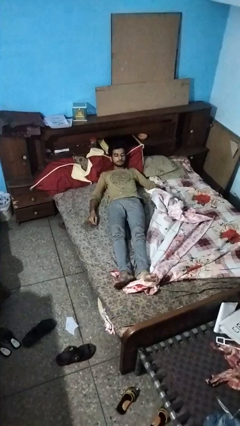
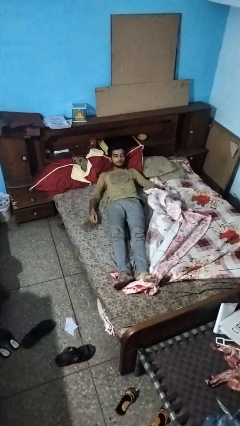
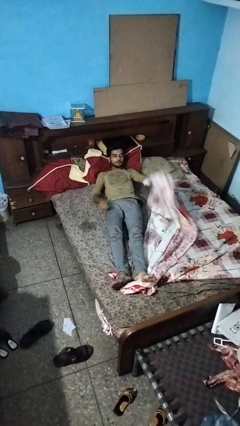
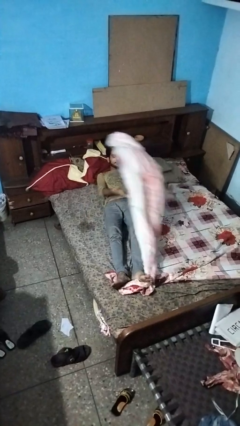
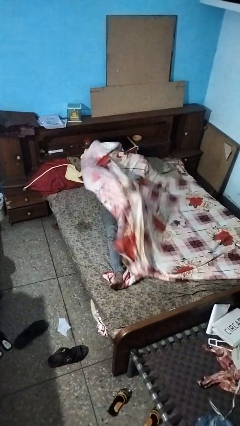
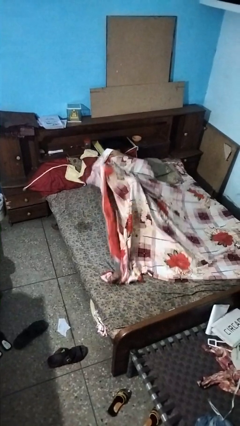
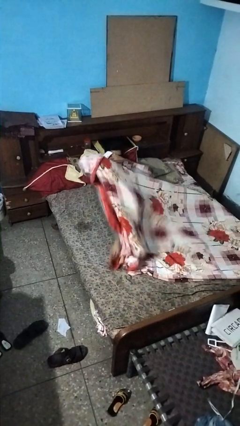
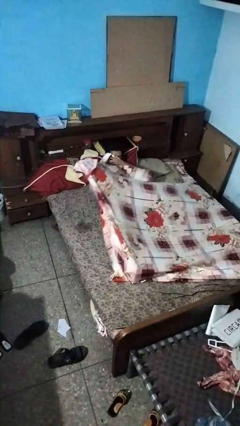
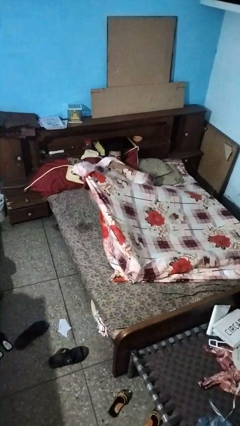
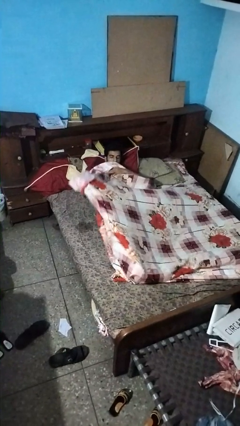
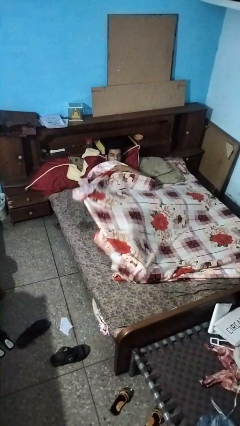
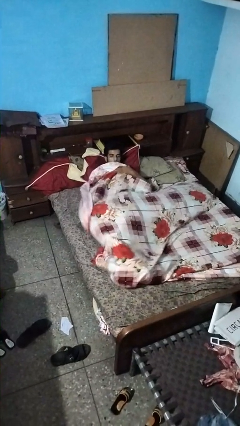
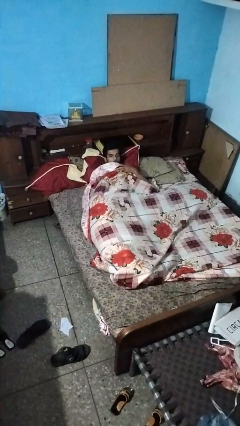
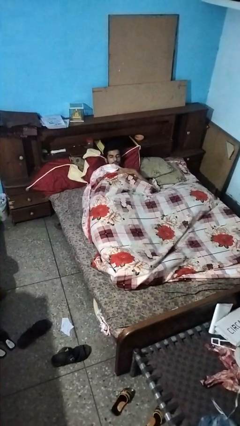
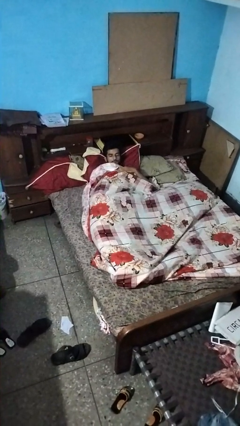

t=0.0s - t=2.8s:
person covers with bedsheets

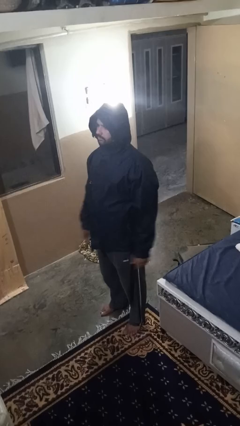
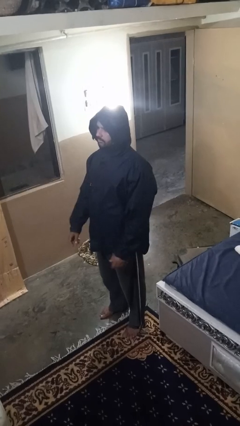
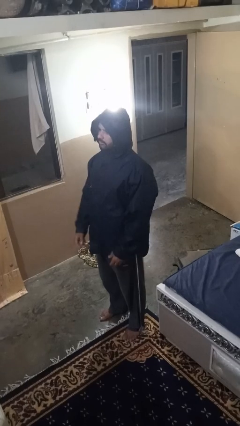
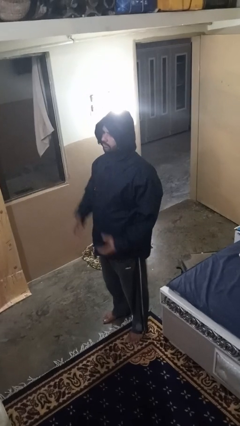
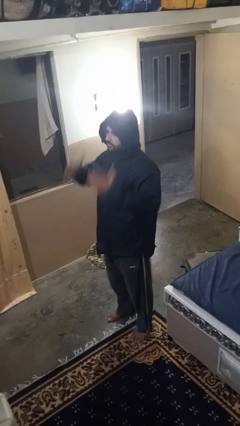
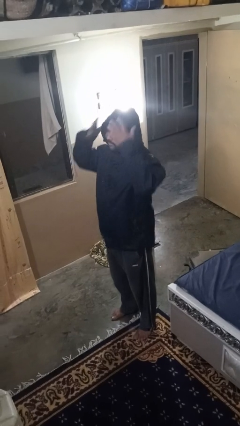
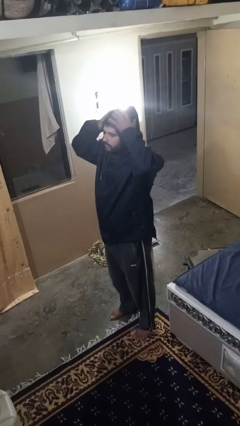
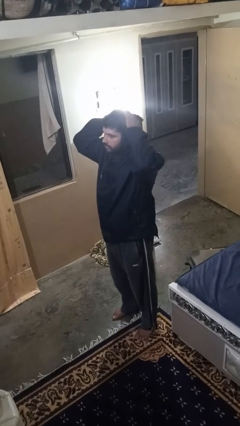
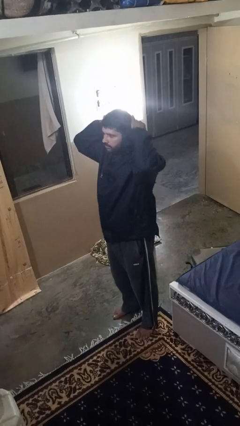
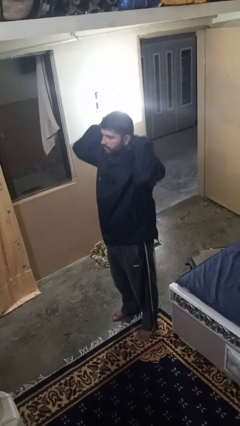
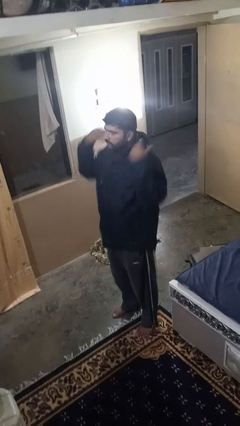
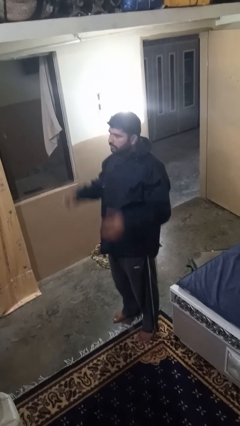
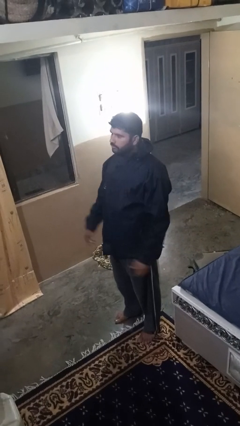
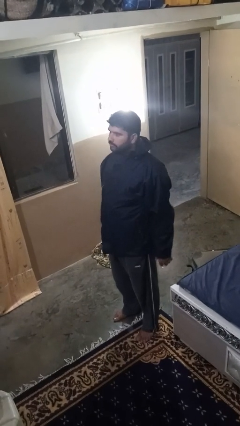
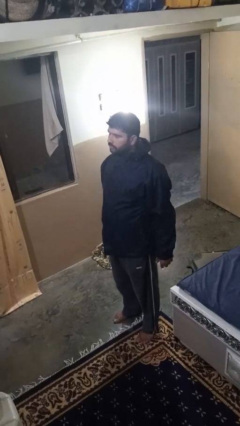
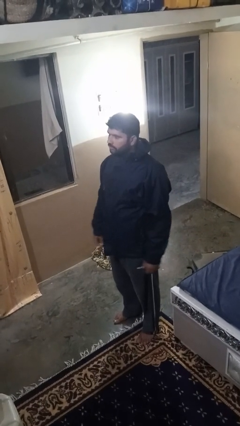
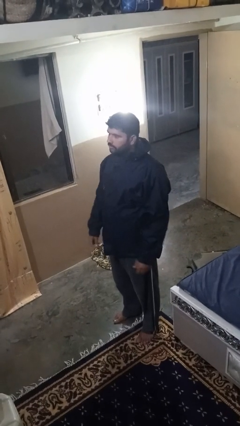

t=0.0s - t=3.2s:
person takes off hoodie

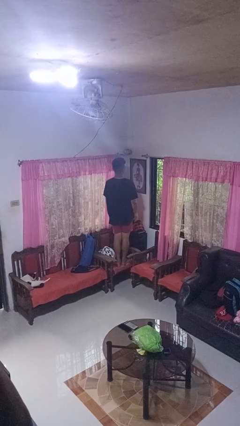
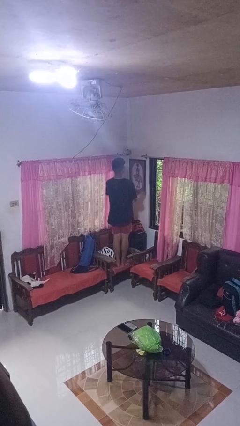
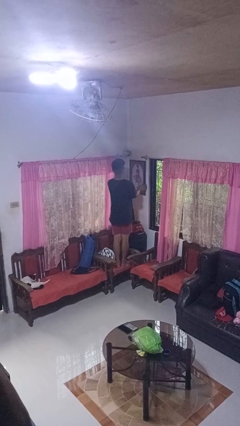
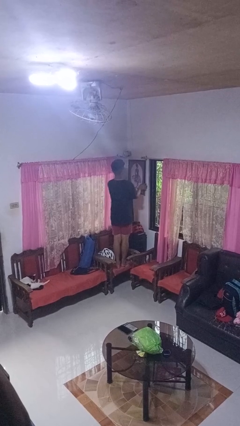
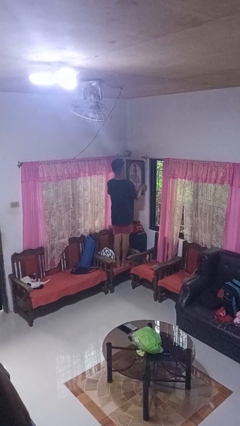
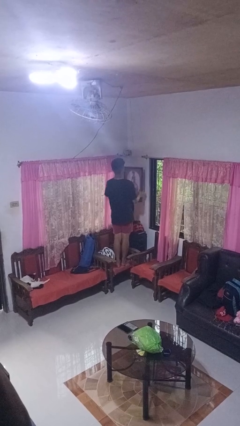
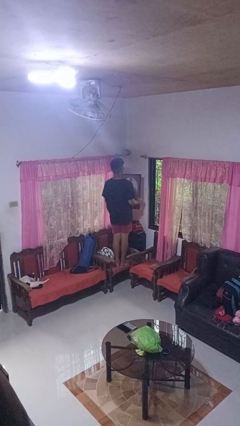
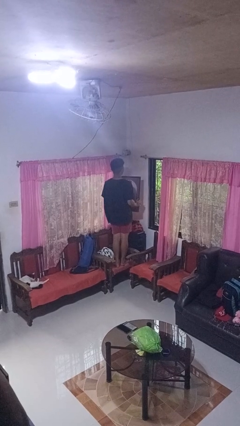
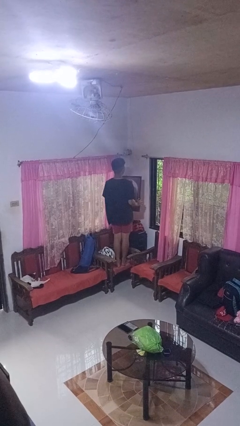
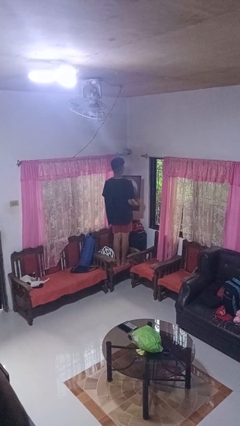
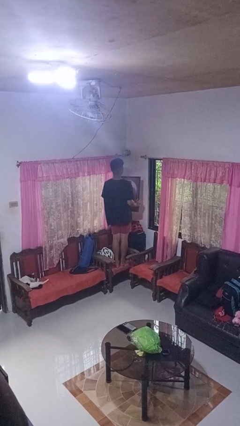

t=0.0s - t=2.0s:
person takes down picture frame

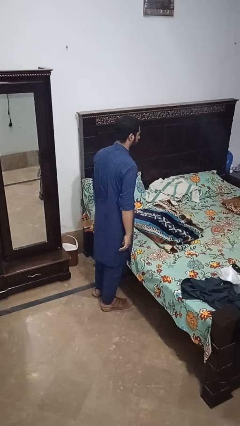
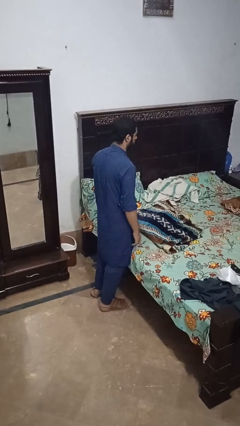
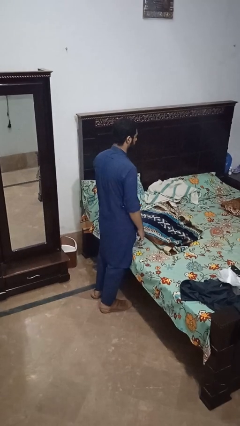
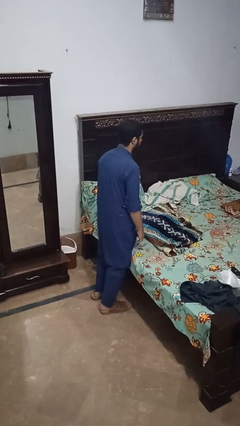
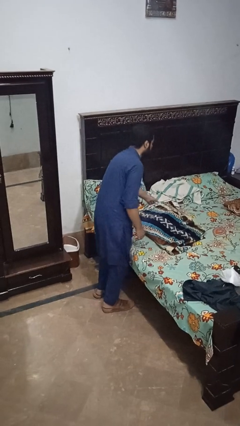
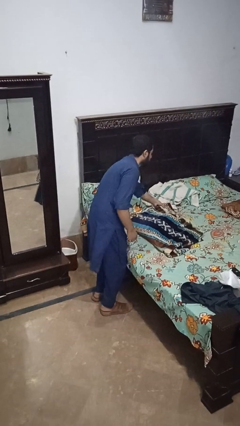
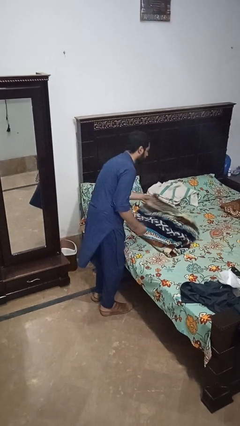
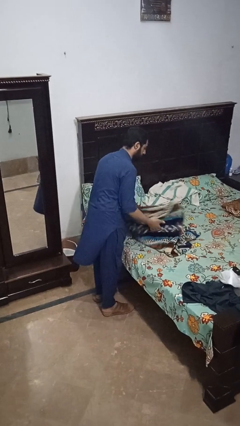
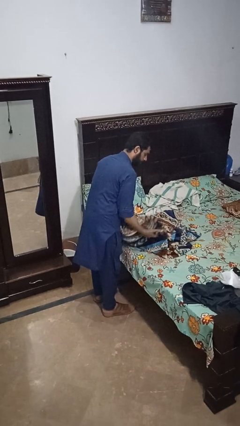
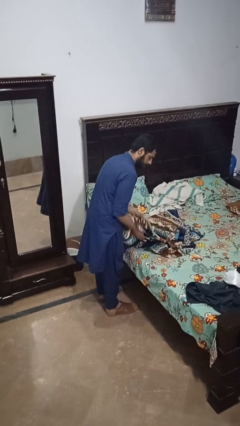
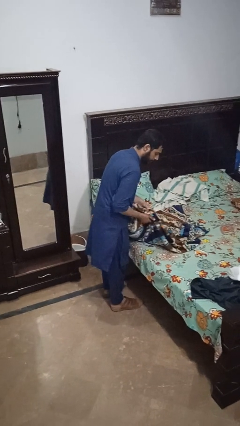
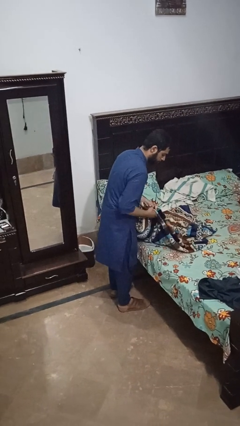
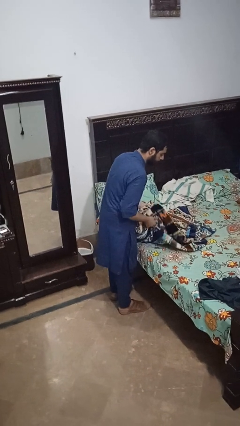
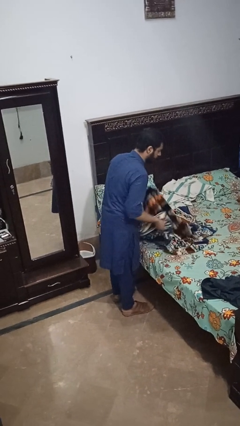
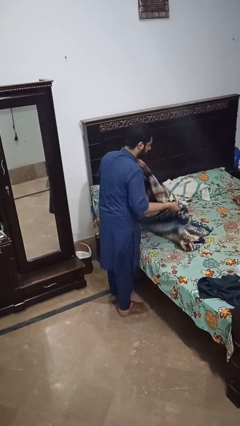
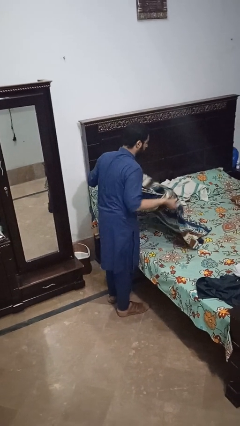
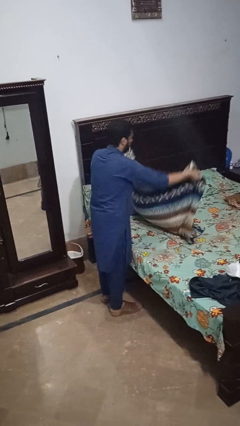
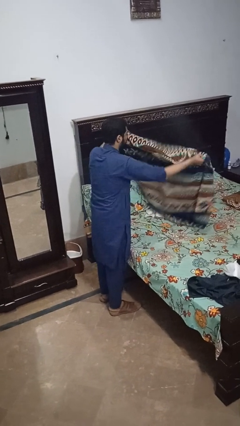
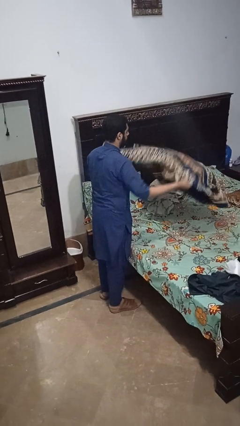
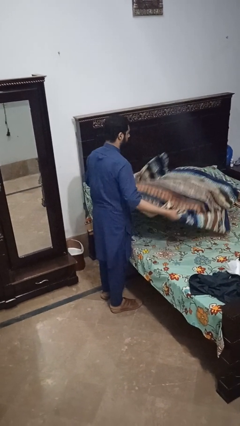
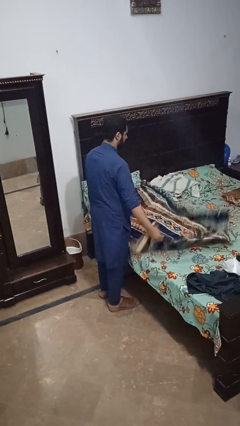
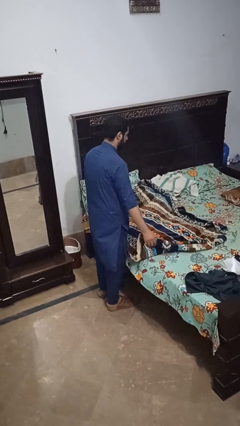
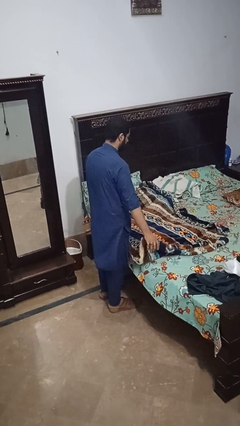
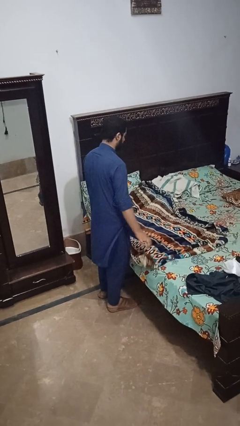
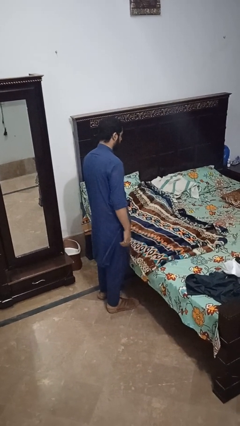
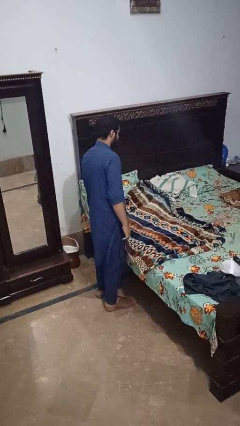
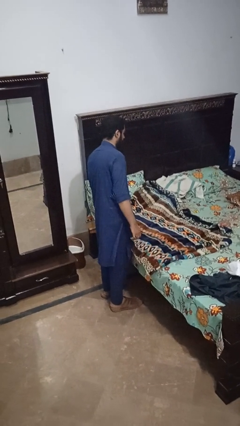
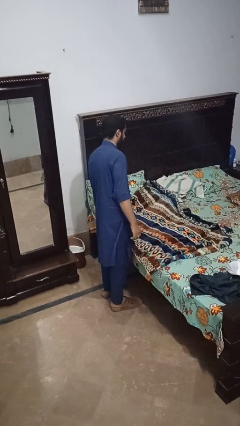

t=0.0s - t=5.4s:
person unfolds blanket

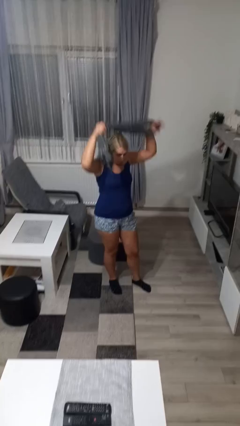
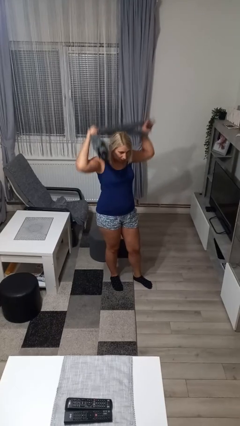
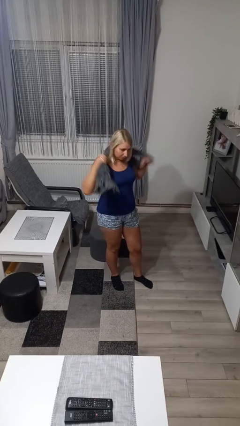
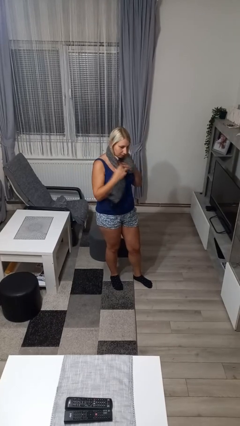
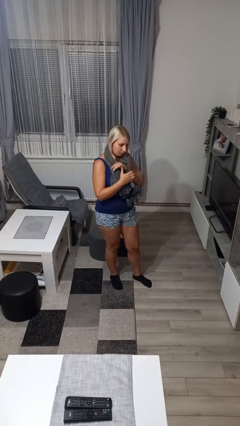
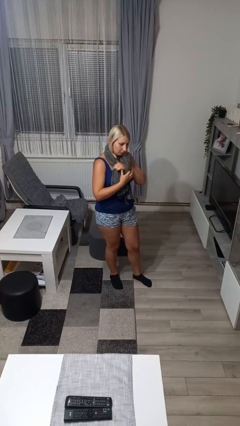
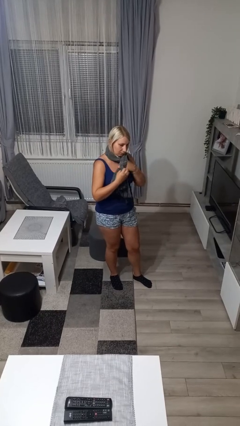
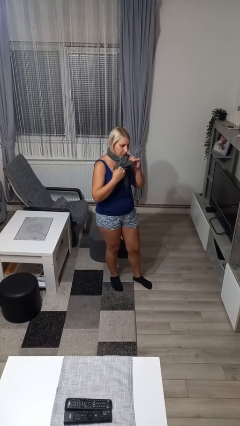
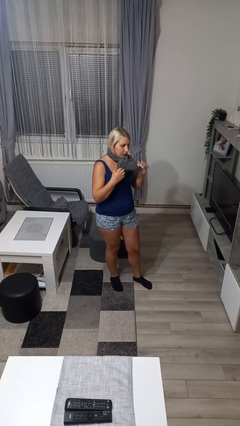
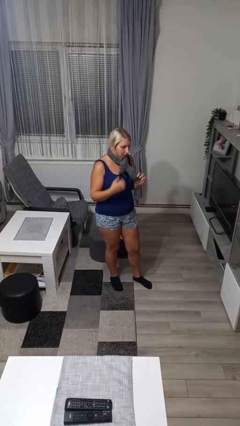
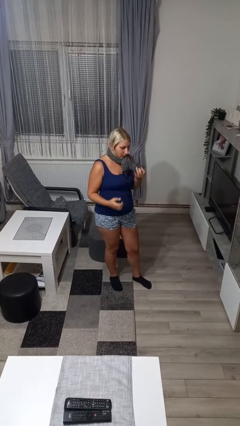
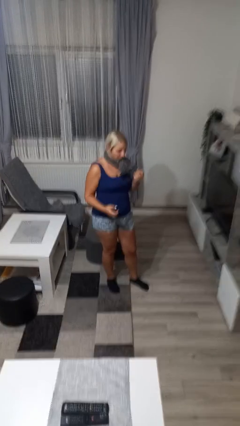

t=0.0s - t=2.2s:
person puts on scarf

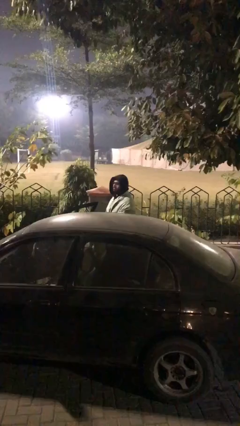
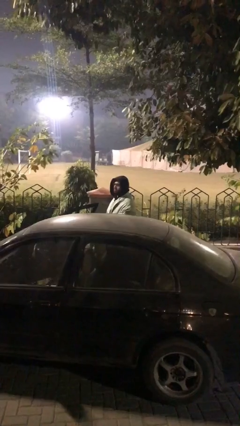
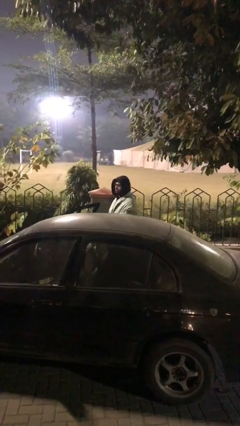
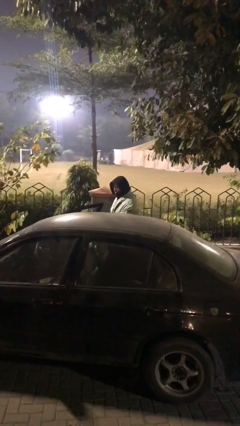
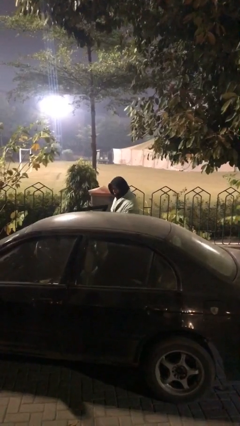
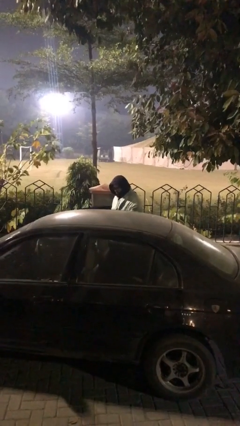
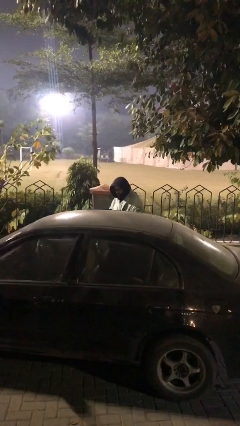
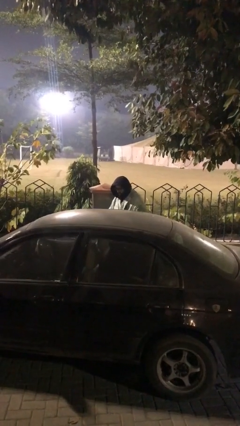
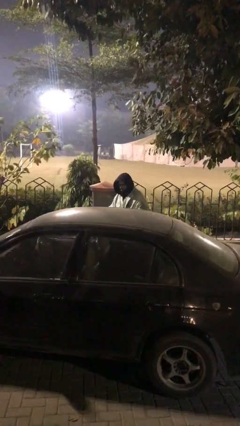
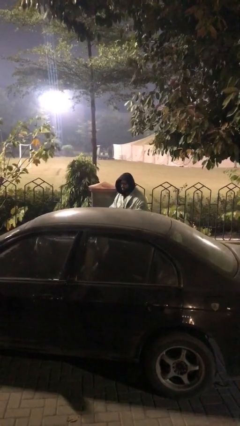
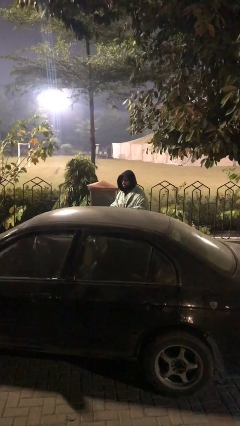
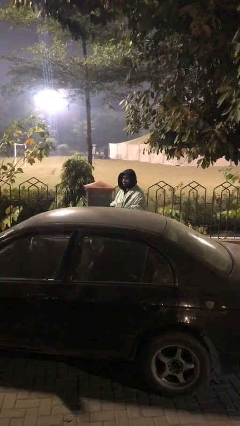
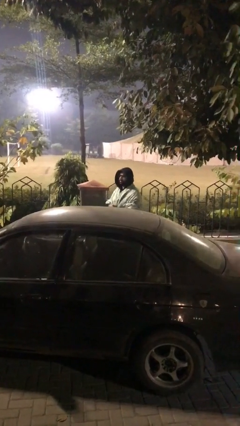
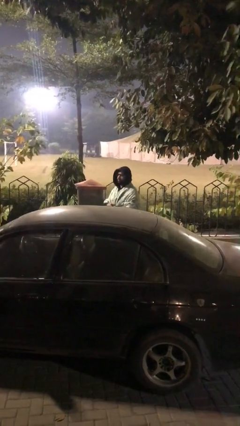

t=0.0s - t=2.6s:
person closes car door
